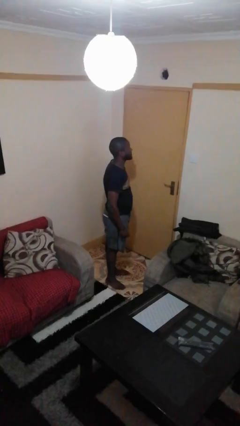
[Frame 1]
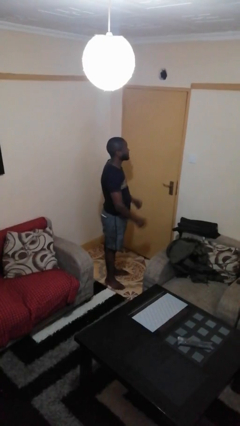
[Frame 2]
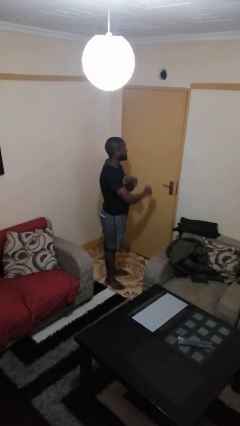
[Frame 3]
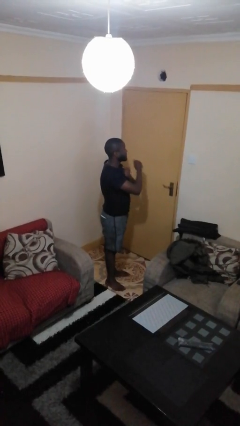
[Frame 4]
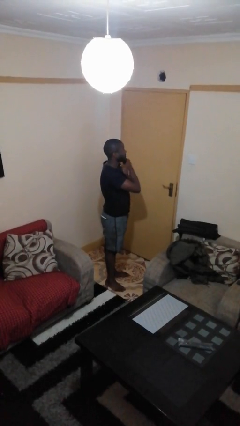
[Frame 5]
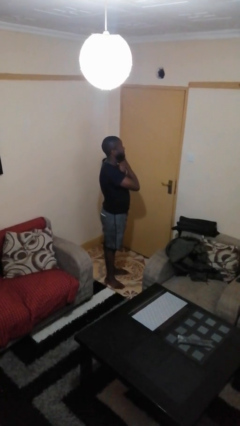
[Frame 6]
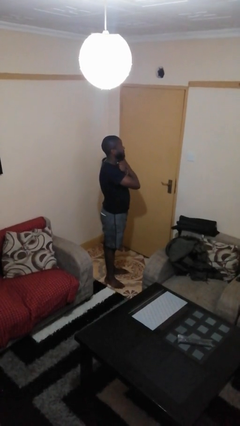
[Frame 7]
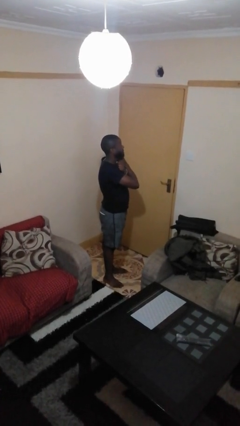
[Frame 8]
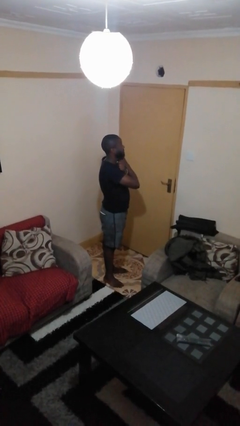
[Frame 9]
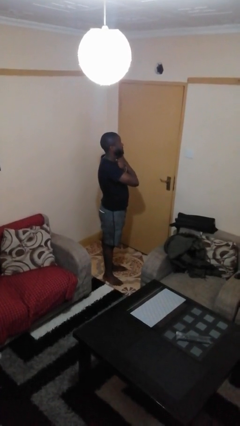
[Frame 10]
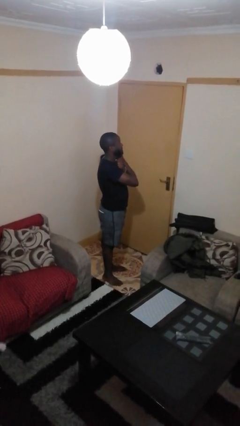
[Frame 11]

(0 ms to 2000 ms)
person gestures arms x

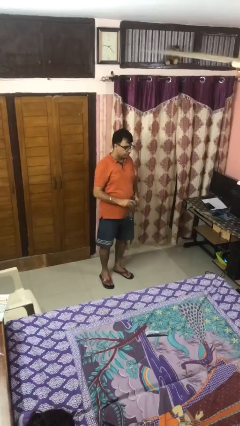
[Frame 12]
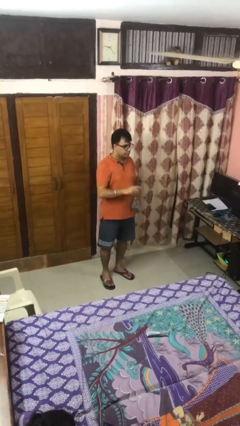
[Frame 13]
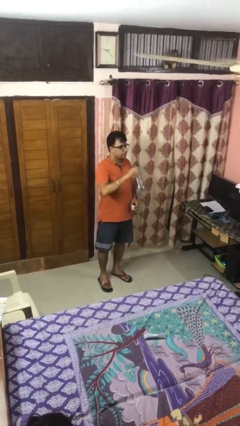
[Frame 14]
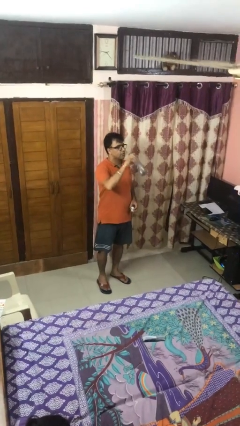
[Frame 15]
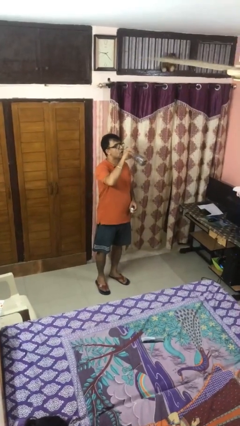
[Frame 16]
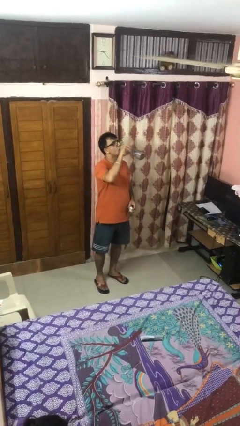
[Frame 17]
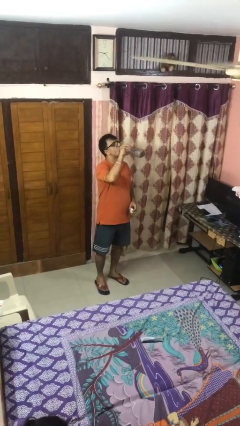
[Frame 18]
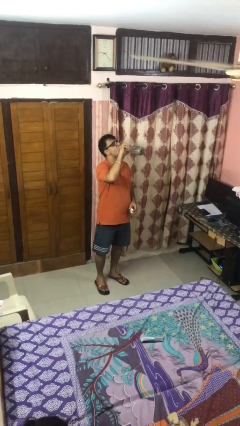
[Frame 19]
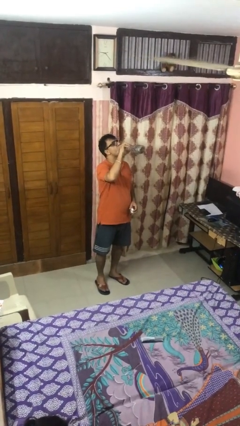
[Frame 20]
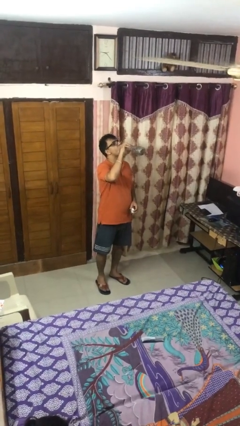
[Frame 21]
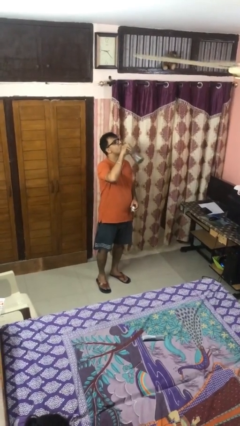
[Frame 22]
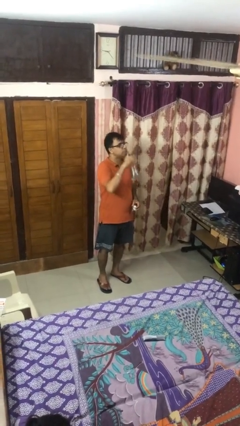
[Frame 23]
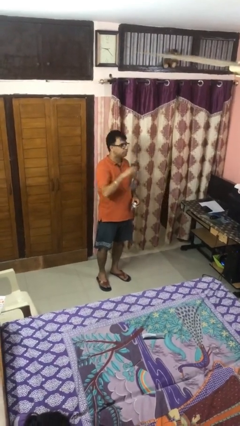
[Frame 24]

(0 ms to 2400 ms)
person drinks from bottle

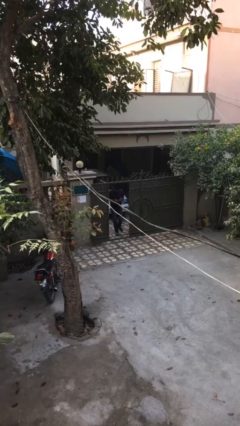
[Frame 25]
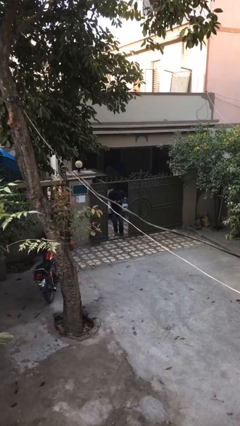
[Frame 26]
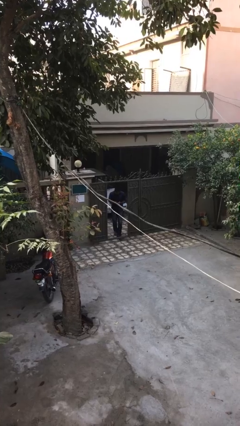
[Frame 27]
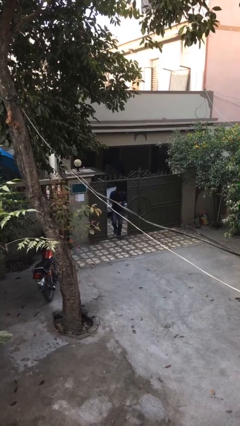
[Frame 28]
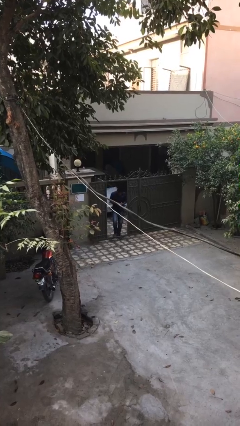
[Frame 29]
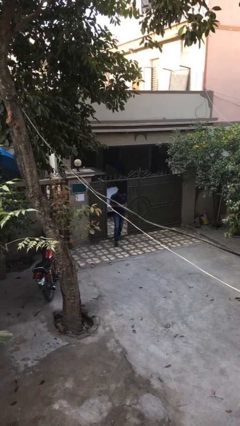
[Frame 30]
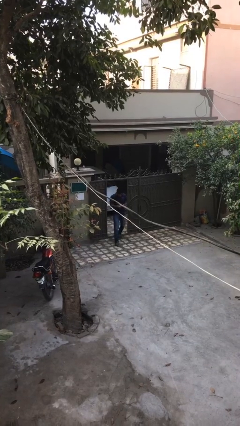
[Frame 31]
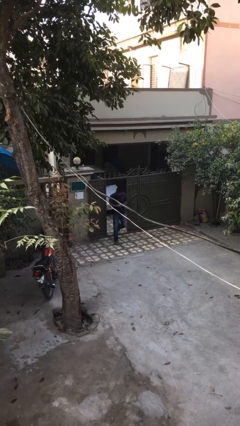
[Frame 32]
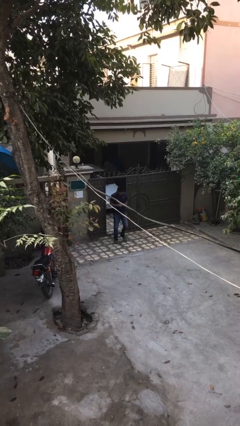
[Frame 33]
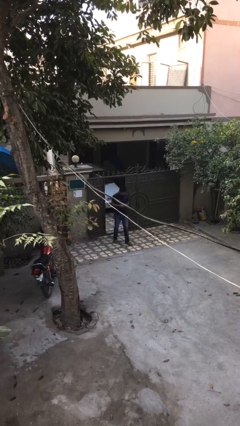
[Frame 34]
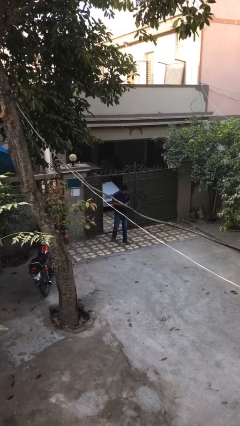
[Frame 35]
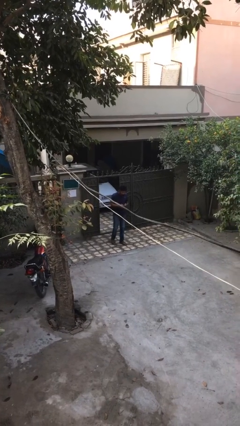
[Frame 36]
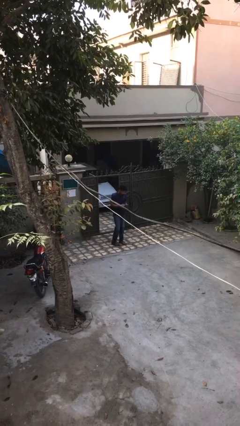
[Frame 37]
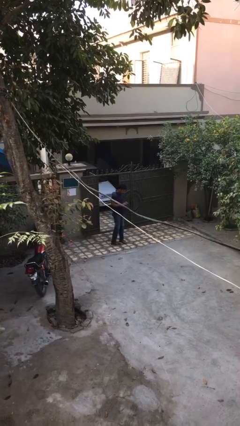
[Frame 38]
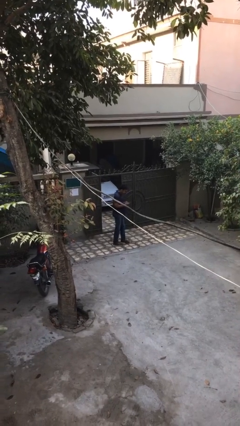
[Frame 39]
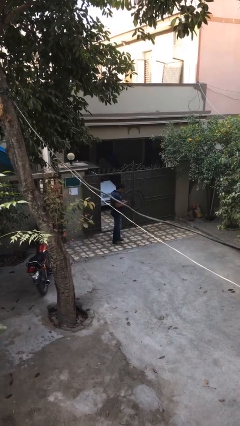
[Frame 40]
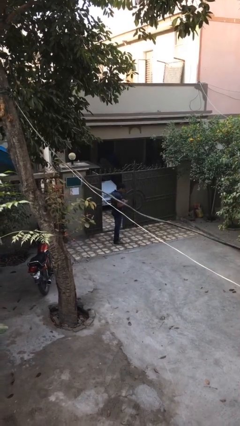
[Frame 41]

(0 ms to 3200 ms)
person enters scene through structure

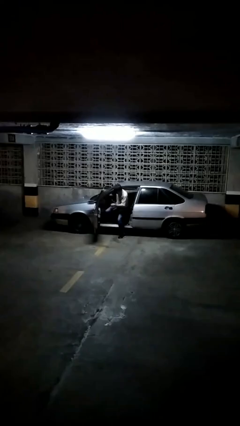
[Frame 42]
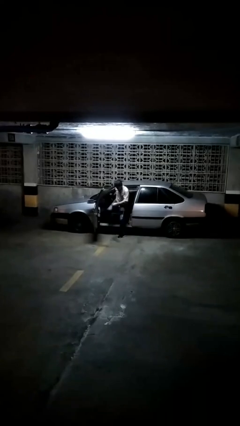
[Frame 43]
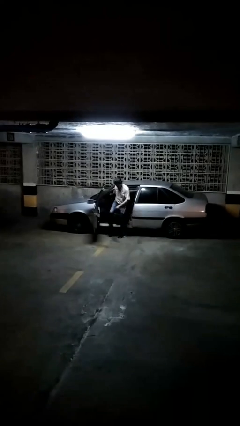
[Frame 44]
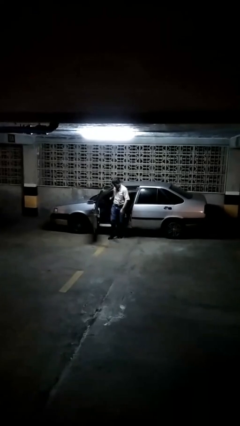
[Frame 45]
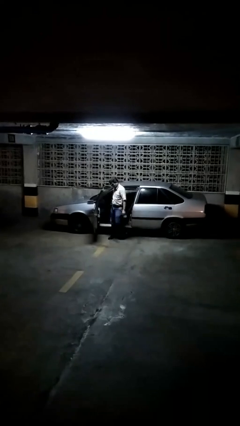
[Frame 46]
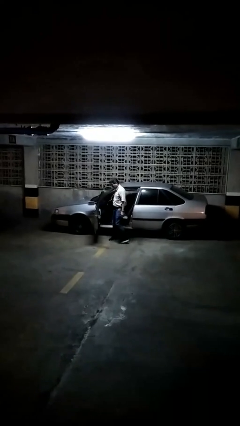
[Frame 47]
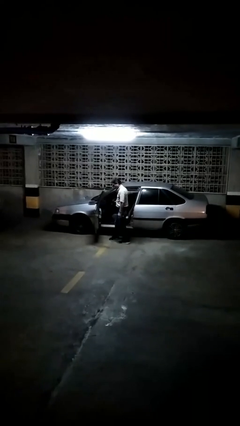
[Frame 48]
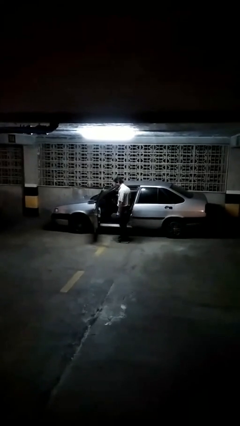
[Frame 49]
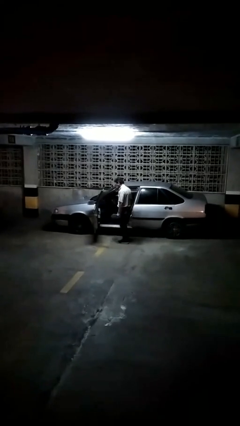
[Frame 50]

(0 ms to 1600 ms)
person exits car

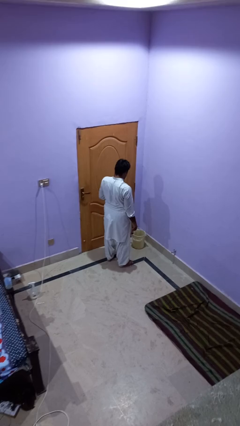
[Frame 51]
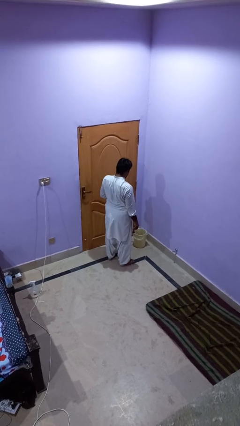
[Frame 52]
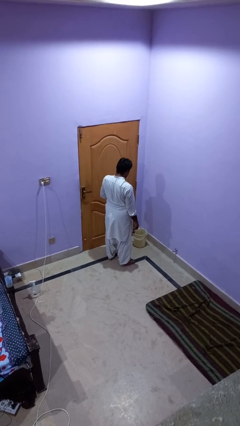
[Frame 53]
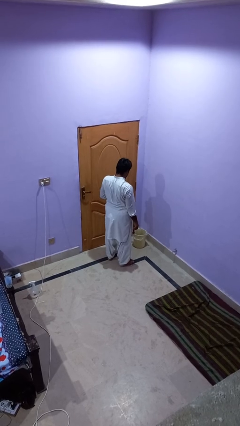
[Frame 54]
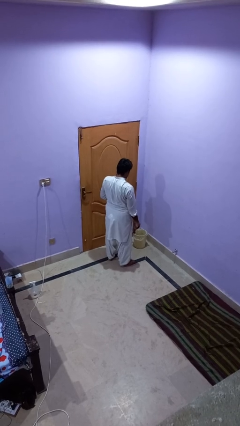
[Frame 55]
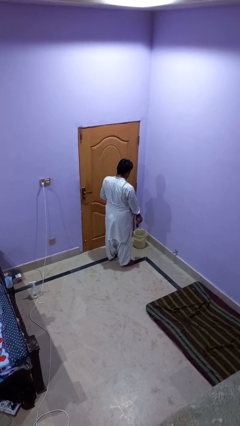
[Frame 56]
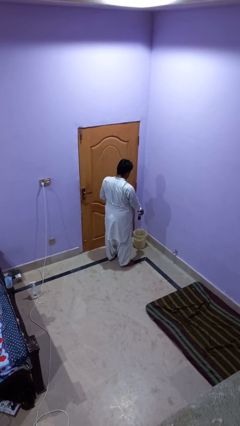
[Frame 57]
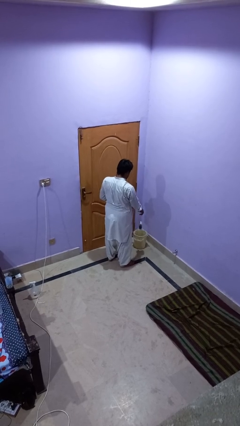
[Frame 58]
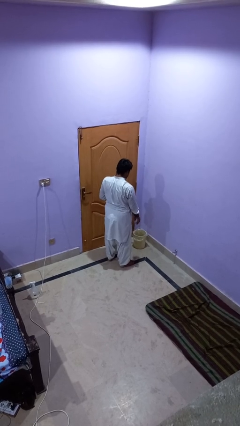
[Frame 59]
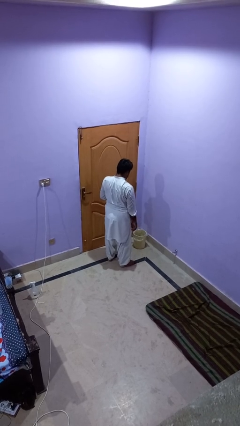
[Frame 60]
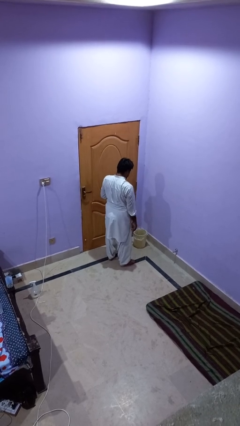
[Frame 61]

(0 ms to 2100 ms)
person discards trash

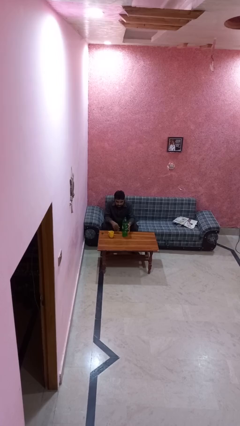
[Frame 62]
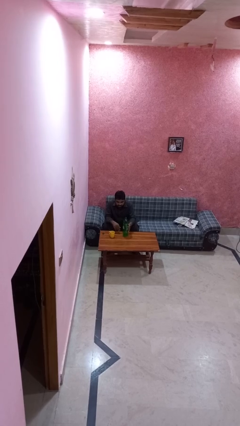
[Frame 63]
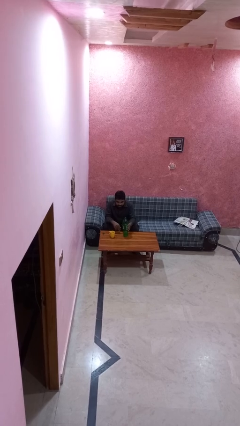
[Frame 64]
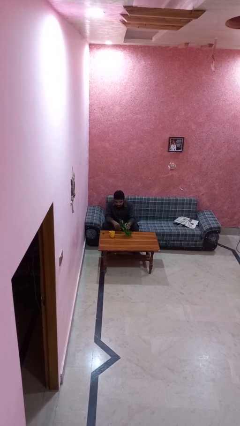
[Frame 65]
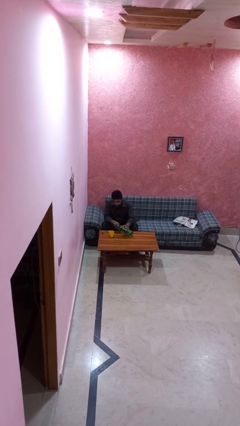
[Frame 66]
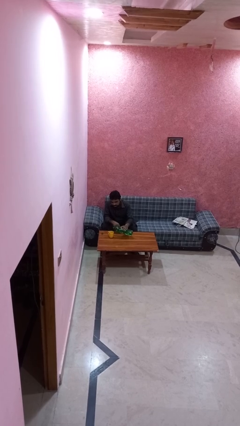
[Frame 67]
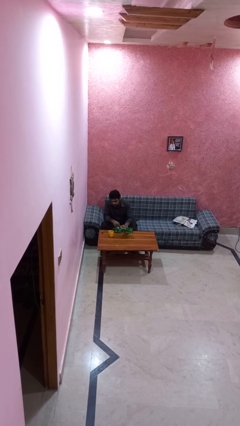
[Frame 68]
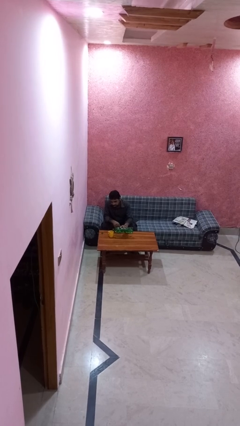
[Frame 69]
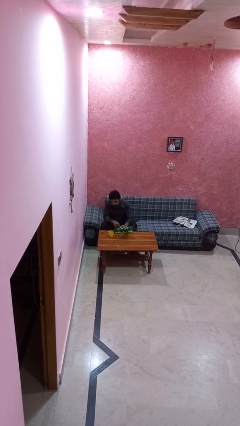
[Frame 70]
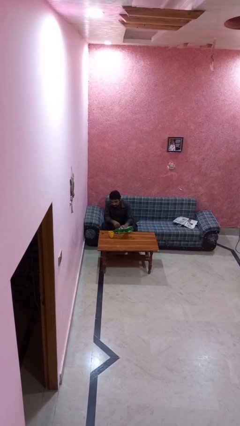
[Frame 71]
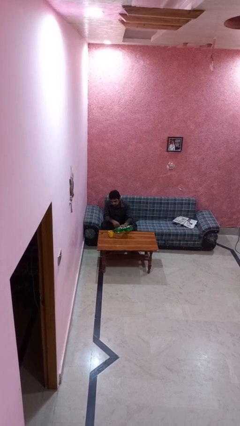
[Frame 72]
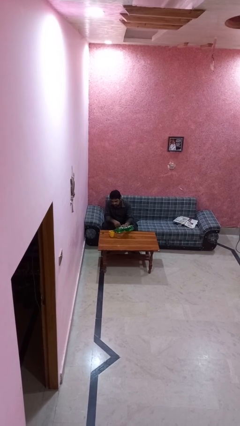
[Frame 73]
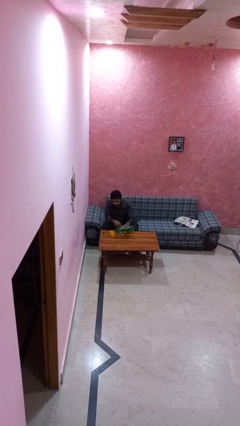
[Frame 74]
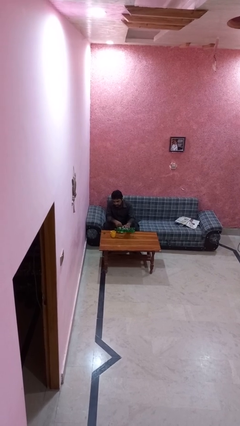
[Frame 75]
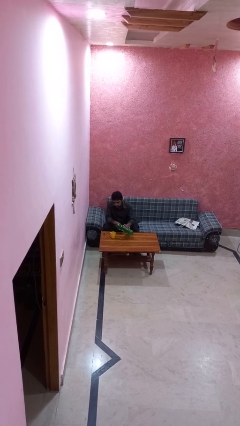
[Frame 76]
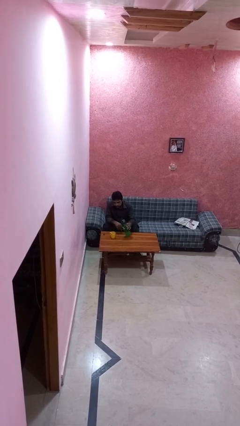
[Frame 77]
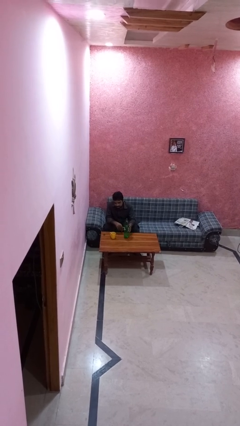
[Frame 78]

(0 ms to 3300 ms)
person pours liquid into cup

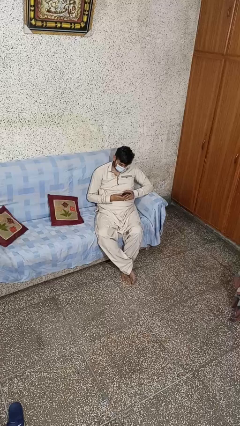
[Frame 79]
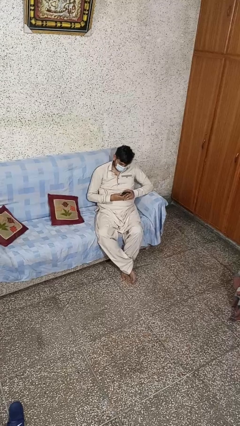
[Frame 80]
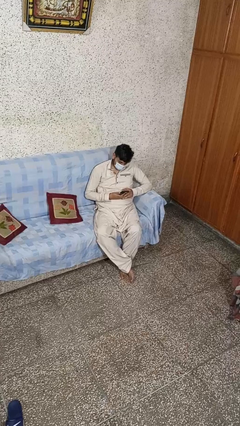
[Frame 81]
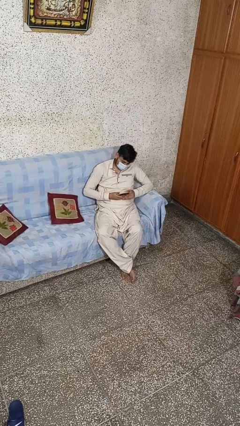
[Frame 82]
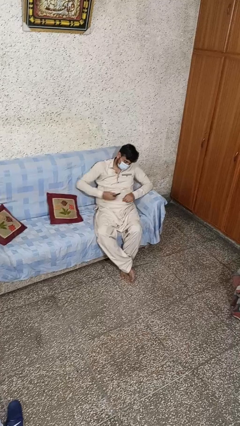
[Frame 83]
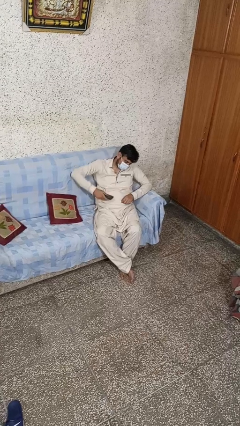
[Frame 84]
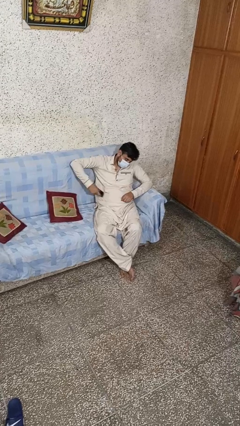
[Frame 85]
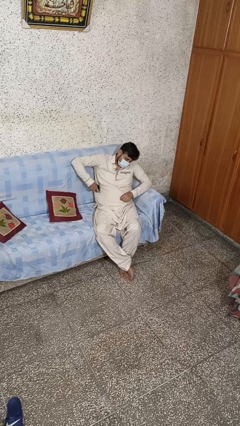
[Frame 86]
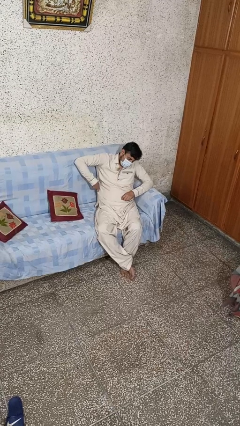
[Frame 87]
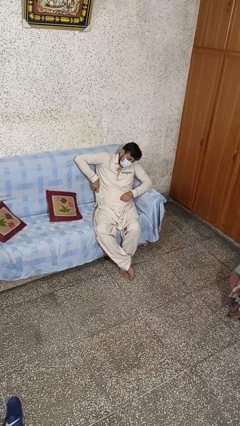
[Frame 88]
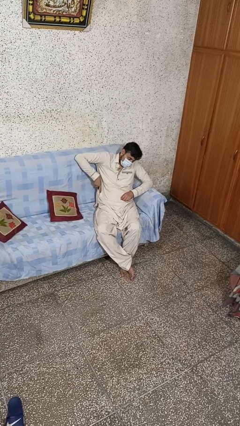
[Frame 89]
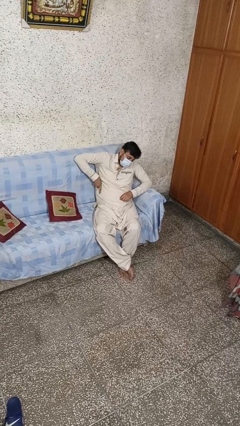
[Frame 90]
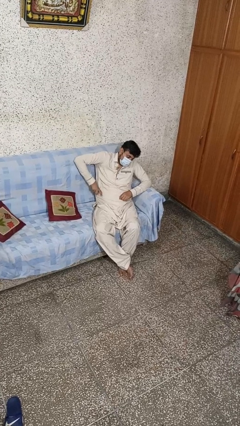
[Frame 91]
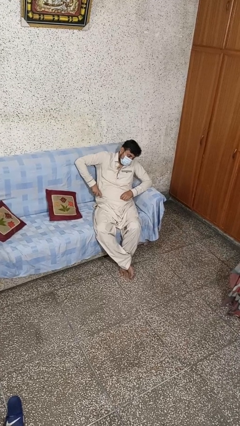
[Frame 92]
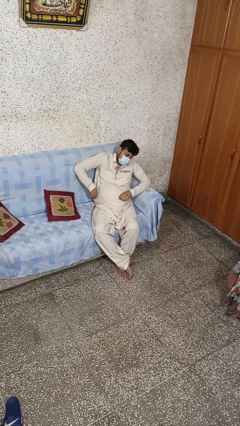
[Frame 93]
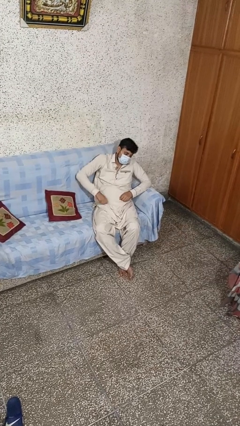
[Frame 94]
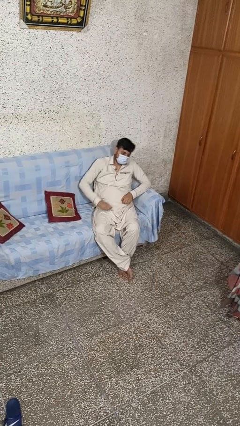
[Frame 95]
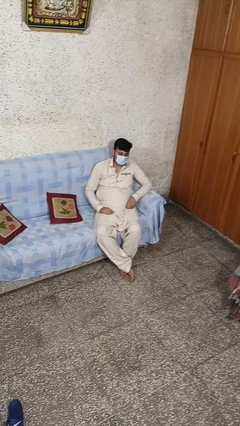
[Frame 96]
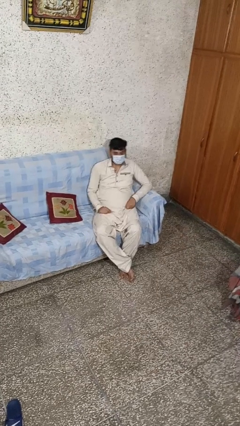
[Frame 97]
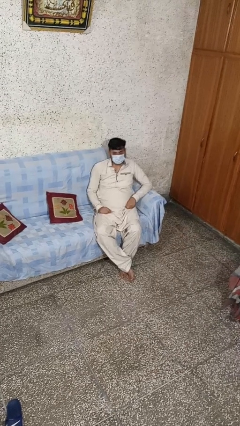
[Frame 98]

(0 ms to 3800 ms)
person puts phone into pocket
